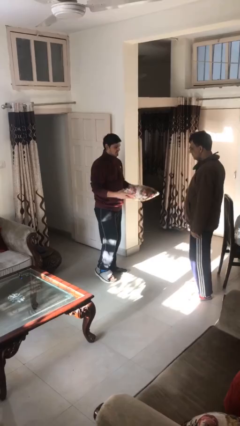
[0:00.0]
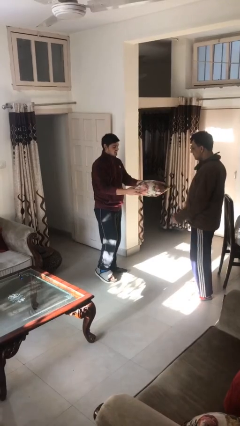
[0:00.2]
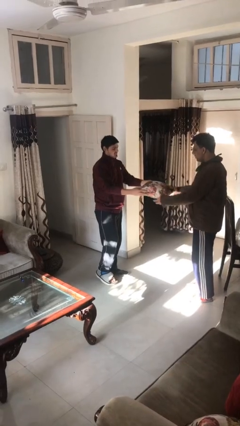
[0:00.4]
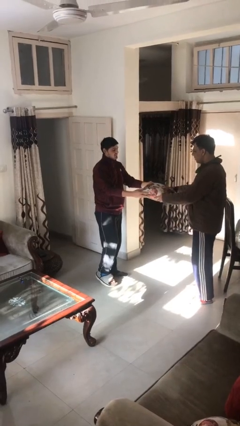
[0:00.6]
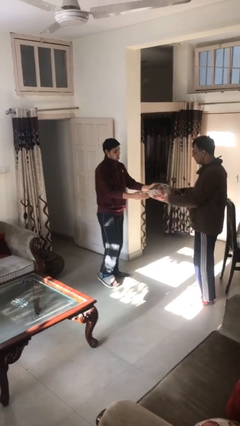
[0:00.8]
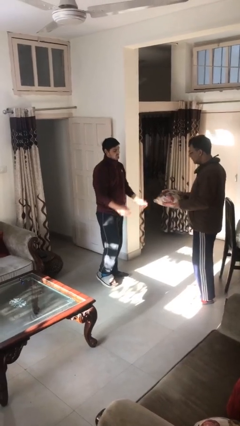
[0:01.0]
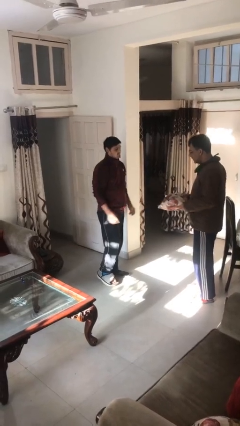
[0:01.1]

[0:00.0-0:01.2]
person transfers object to person

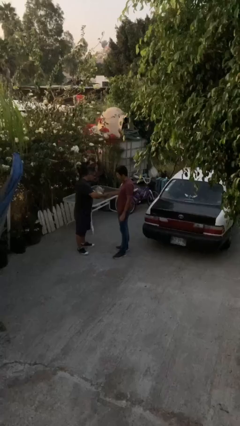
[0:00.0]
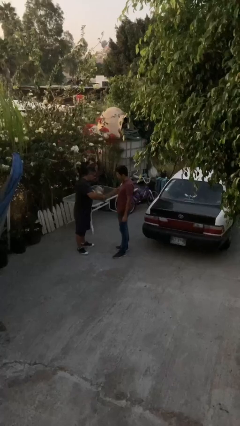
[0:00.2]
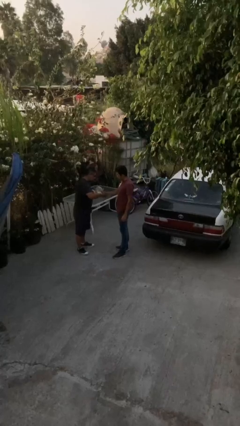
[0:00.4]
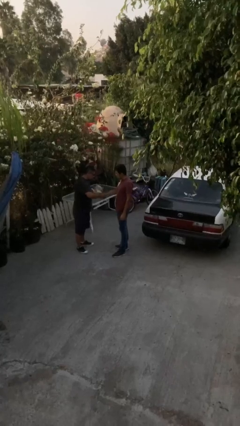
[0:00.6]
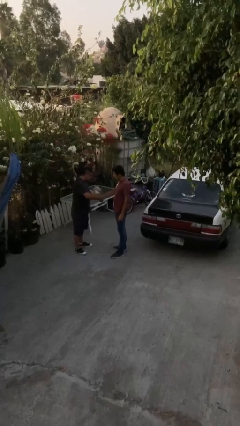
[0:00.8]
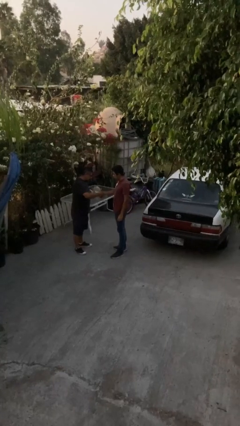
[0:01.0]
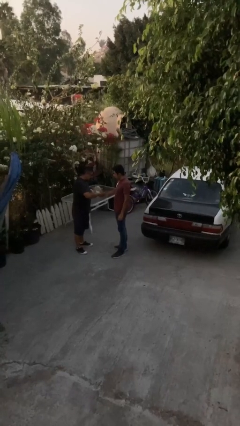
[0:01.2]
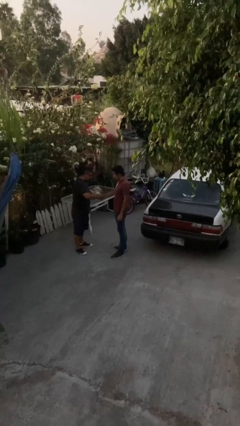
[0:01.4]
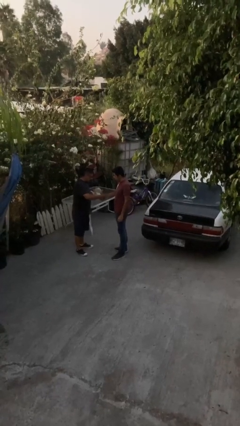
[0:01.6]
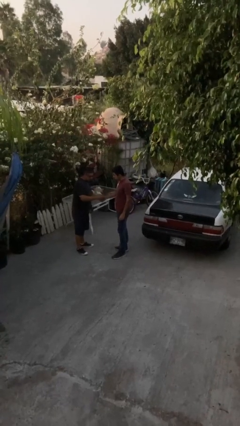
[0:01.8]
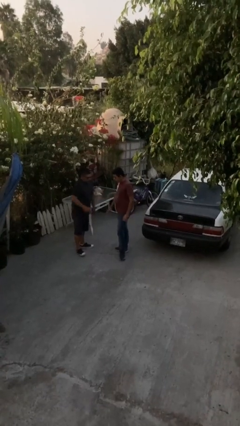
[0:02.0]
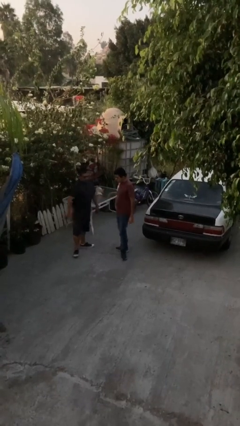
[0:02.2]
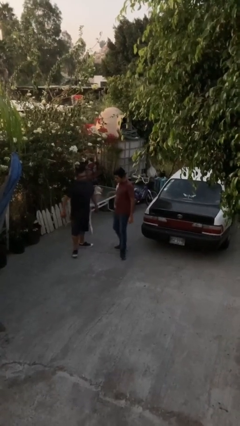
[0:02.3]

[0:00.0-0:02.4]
person shakes hand

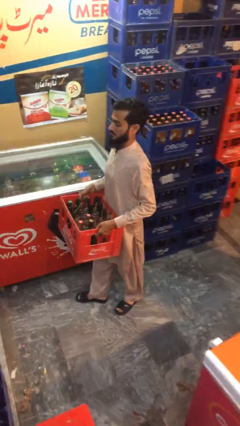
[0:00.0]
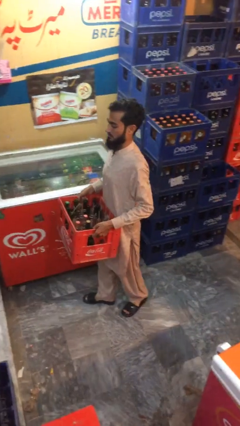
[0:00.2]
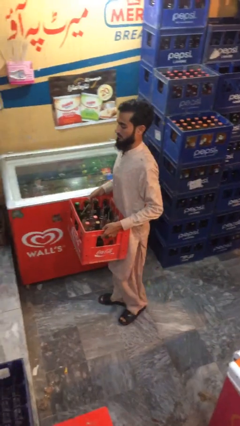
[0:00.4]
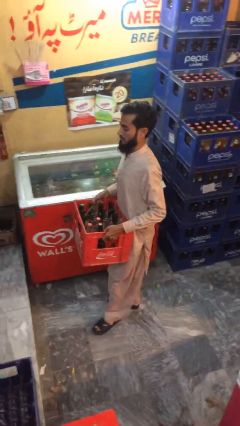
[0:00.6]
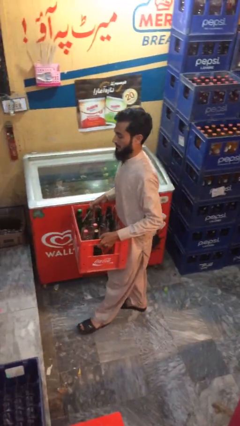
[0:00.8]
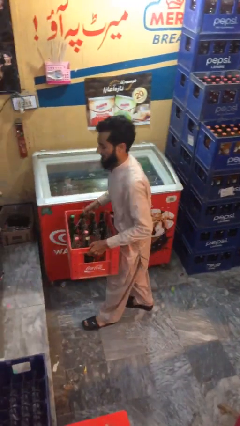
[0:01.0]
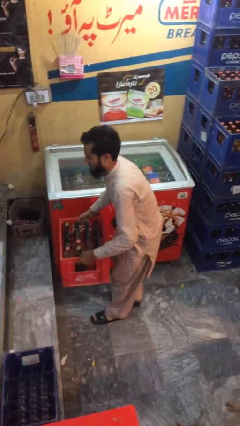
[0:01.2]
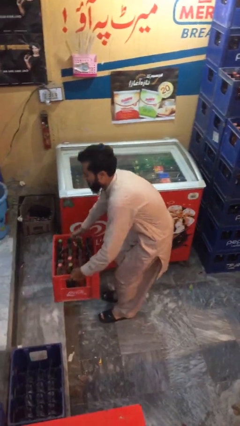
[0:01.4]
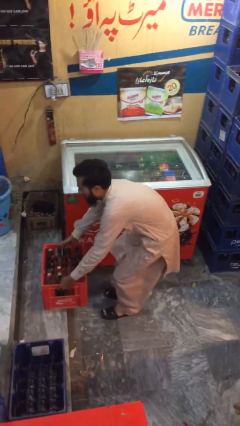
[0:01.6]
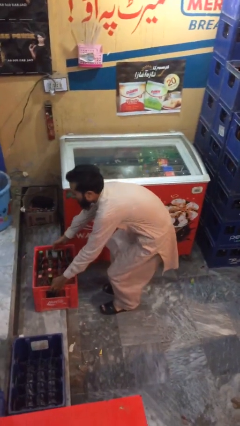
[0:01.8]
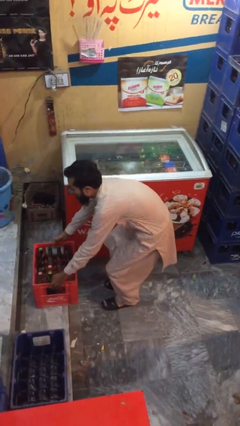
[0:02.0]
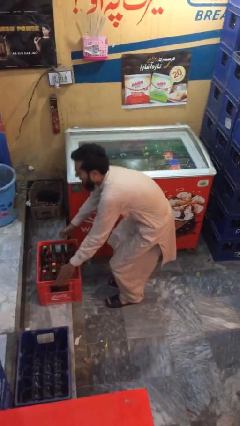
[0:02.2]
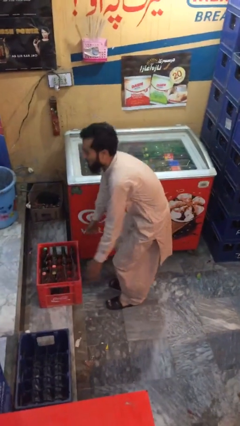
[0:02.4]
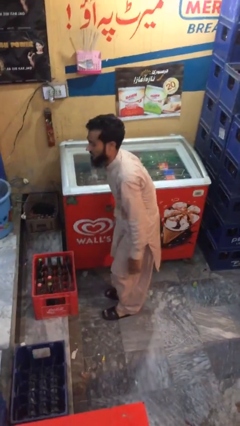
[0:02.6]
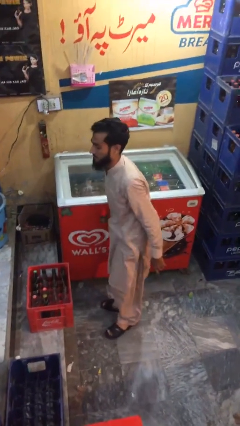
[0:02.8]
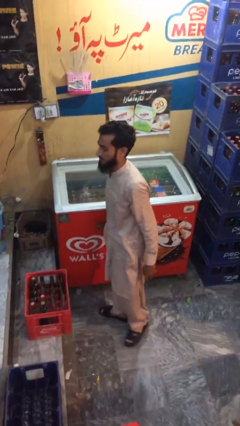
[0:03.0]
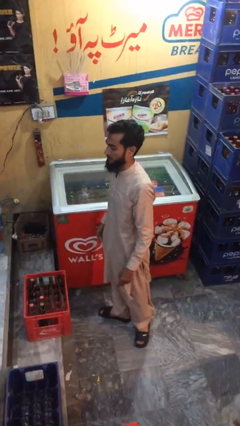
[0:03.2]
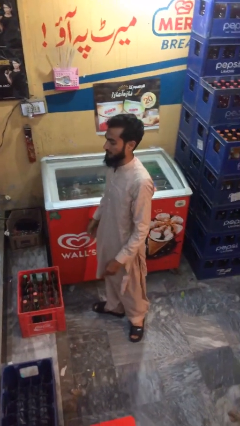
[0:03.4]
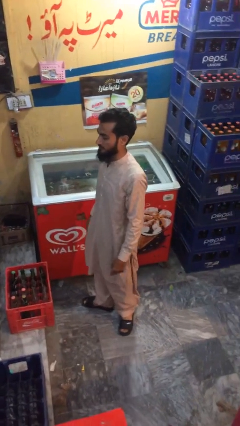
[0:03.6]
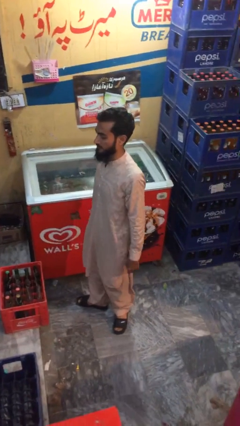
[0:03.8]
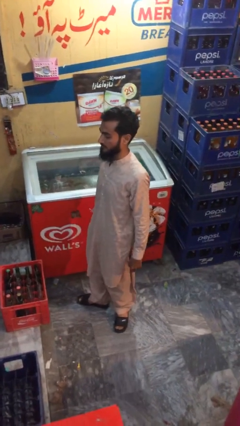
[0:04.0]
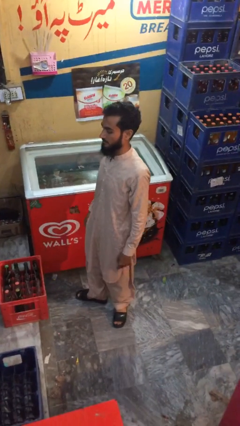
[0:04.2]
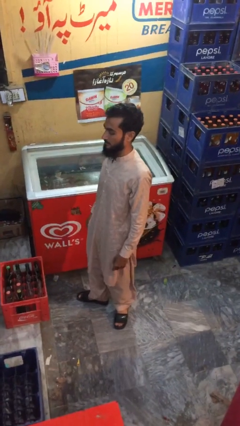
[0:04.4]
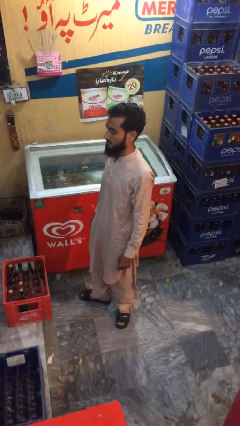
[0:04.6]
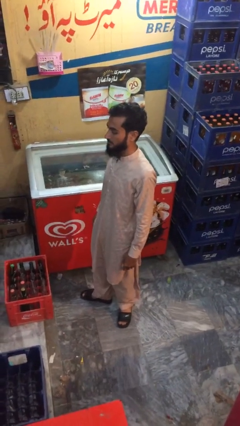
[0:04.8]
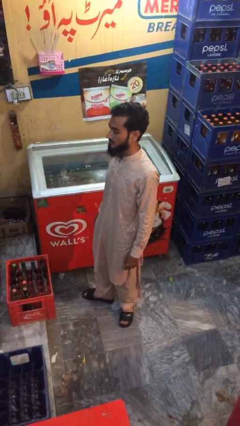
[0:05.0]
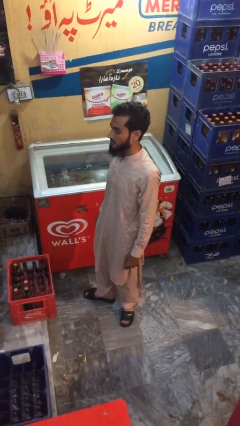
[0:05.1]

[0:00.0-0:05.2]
person puts down object on floor

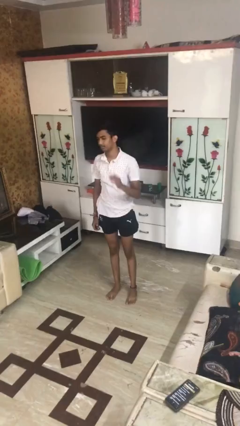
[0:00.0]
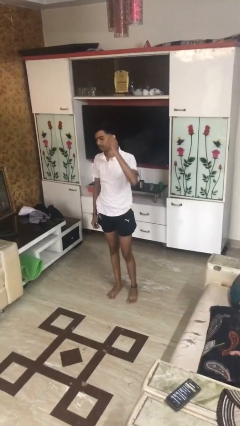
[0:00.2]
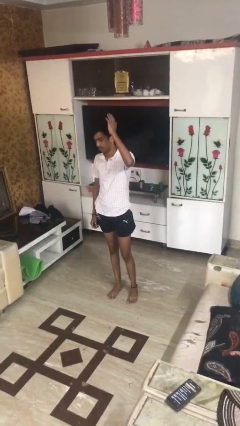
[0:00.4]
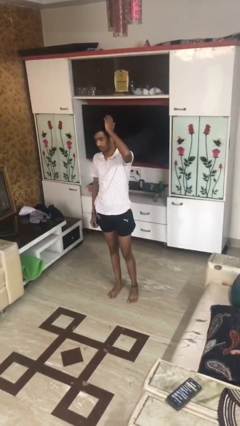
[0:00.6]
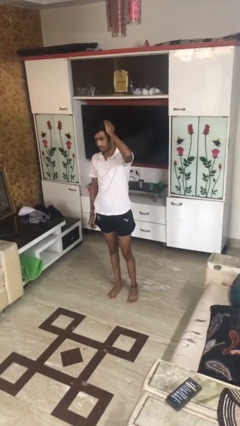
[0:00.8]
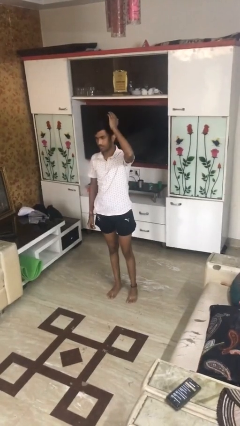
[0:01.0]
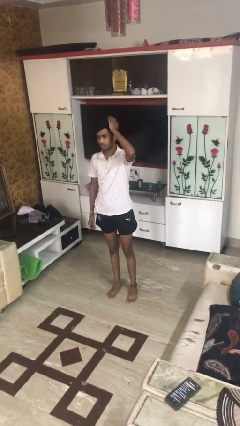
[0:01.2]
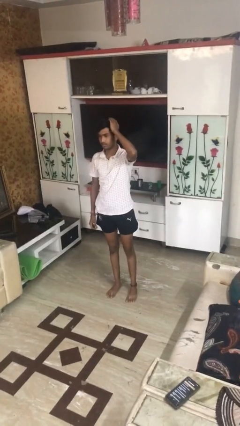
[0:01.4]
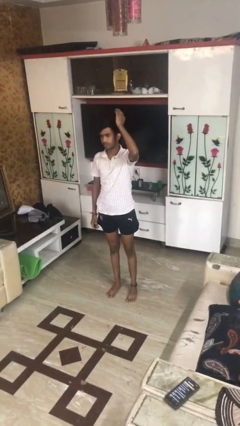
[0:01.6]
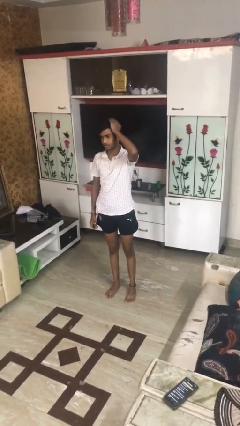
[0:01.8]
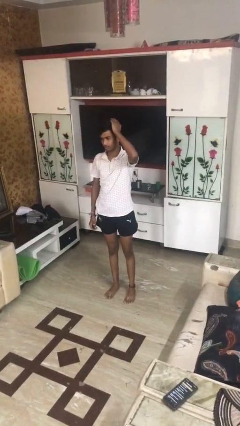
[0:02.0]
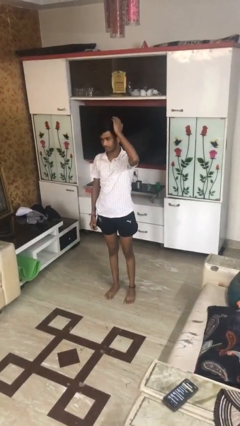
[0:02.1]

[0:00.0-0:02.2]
person pats head

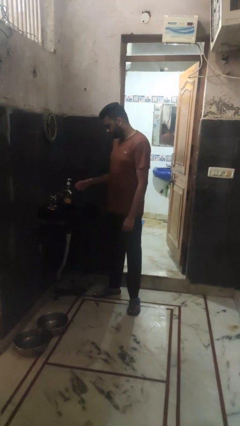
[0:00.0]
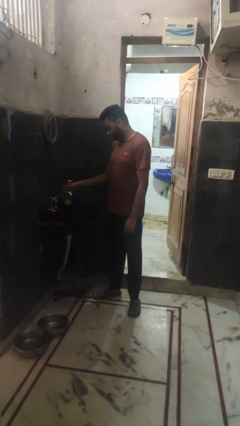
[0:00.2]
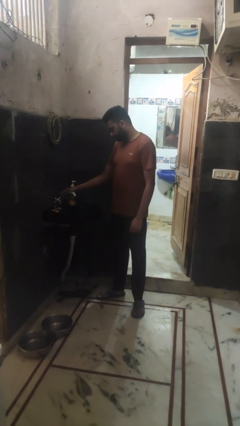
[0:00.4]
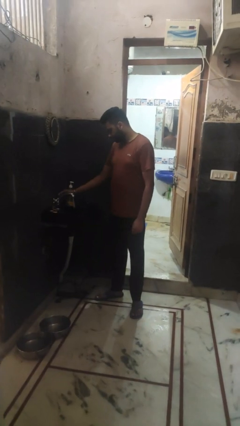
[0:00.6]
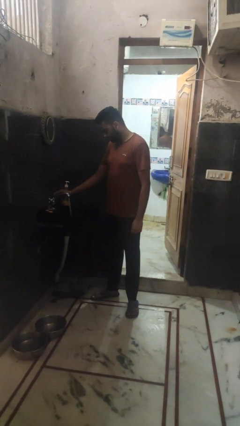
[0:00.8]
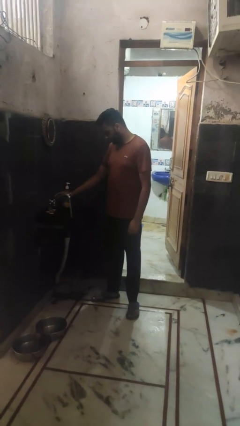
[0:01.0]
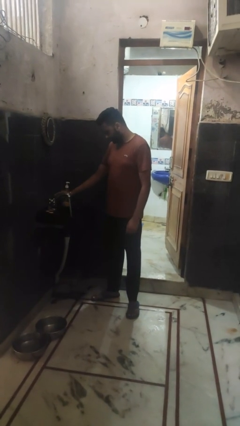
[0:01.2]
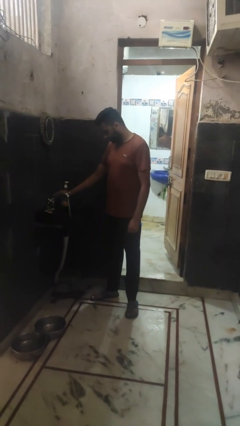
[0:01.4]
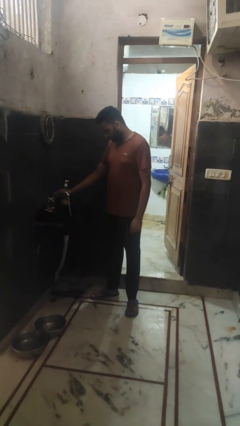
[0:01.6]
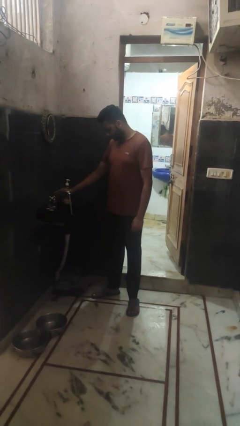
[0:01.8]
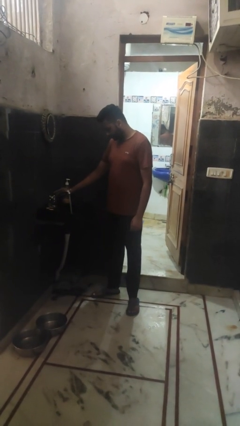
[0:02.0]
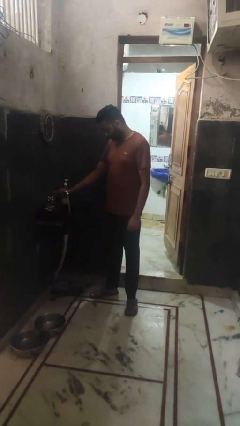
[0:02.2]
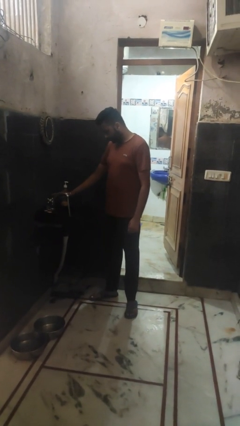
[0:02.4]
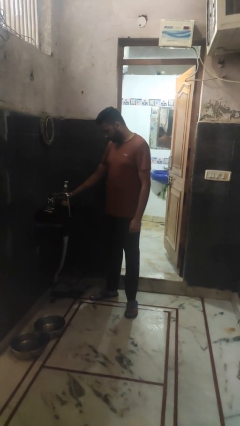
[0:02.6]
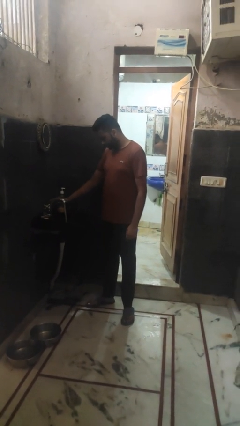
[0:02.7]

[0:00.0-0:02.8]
person turns on faucet

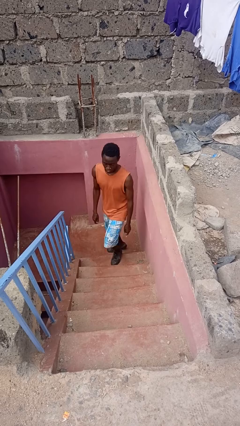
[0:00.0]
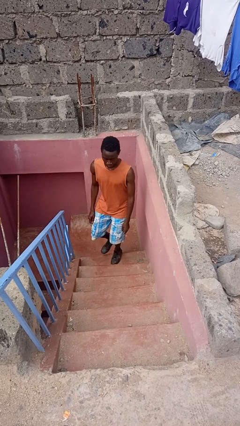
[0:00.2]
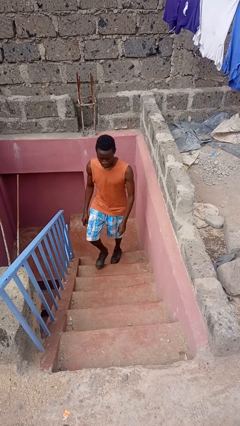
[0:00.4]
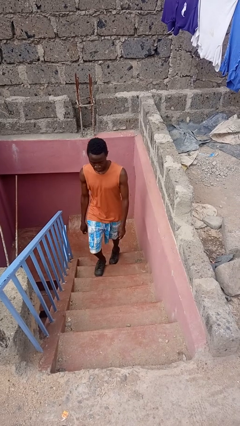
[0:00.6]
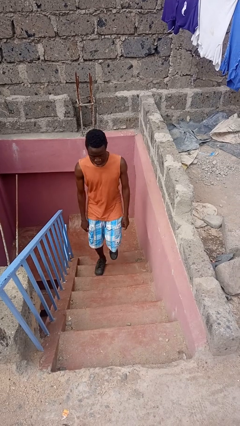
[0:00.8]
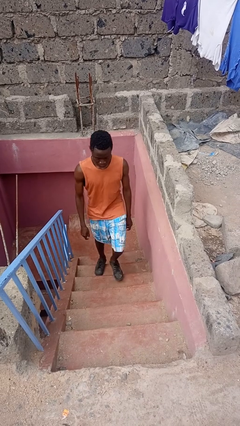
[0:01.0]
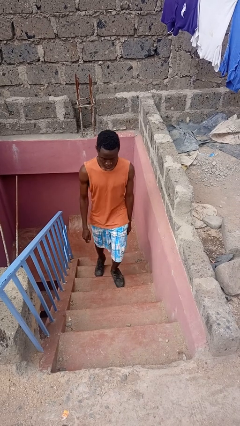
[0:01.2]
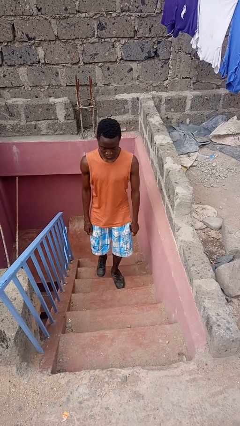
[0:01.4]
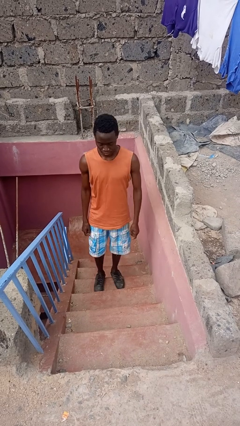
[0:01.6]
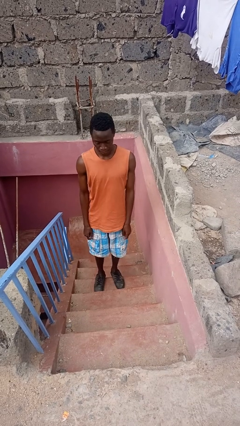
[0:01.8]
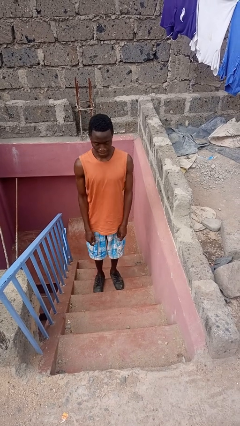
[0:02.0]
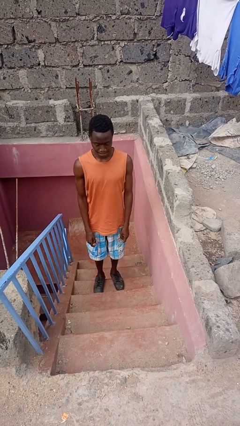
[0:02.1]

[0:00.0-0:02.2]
person climbs up stairs

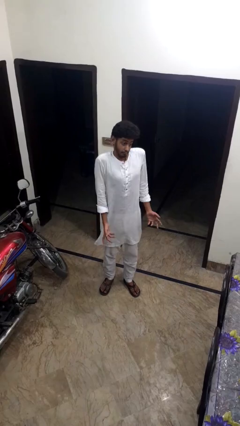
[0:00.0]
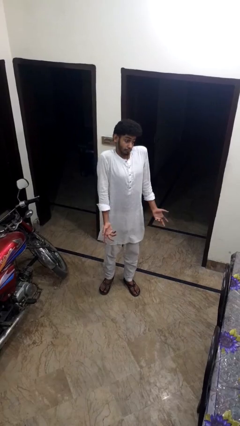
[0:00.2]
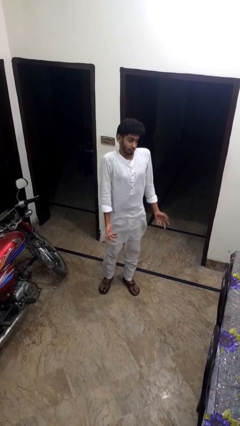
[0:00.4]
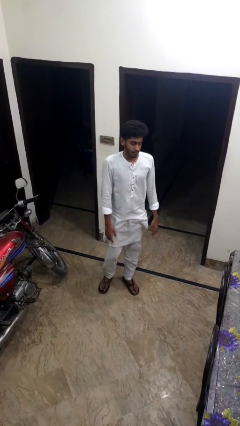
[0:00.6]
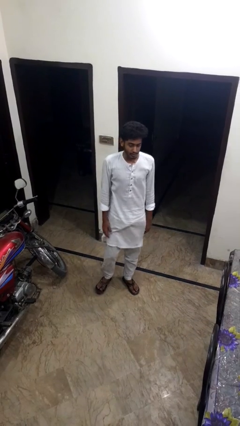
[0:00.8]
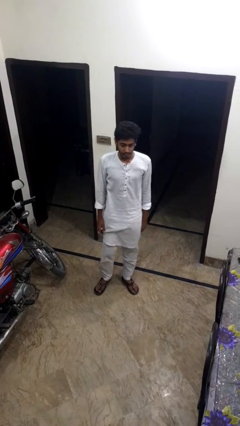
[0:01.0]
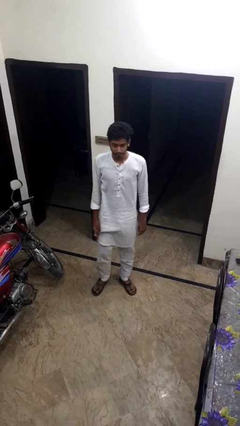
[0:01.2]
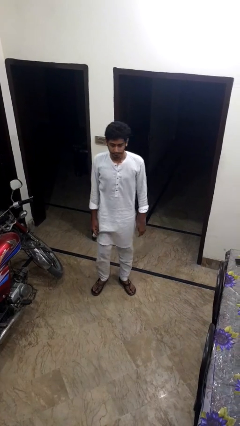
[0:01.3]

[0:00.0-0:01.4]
person shrugs
